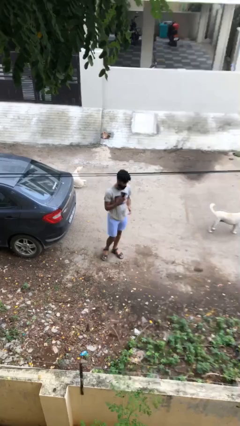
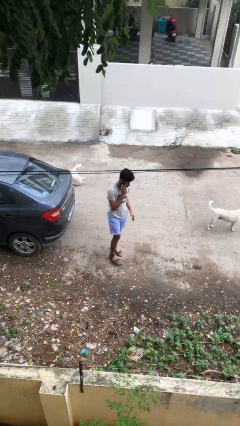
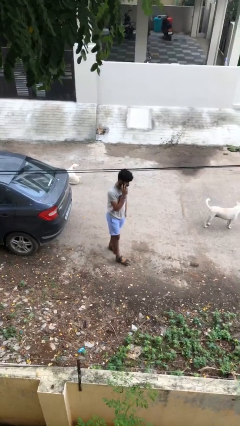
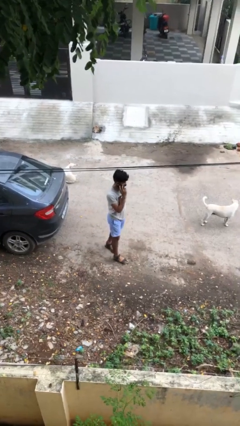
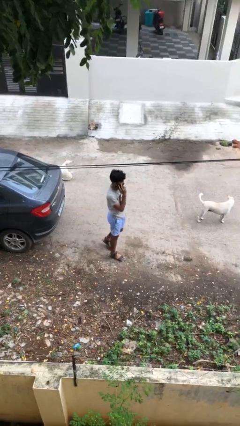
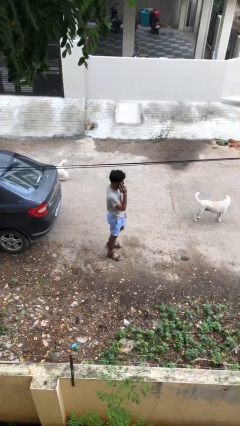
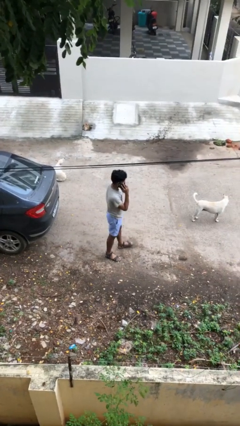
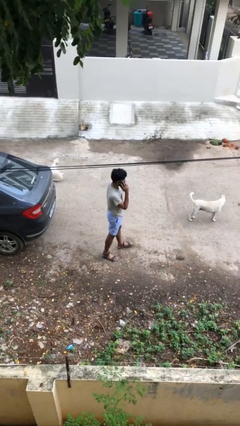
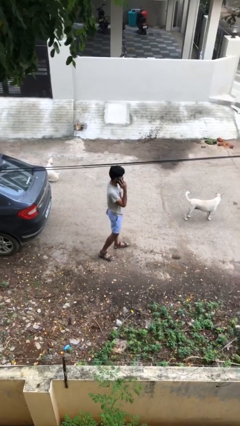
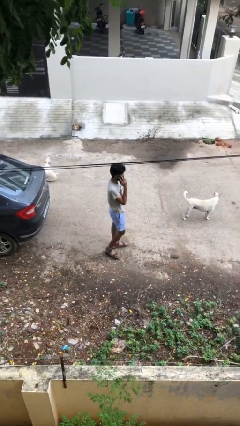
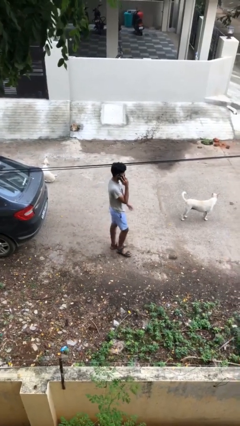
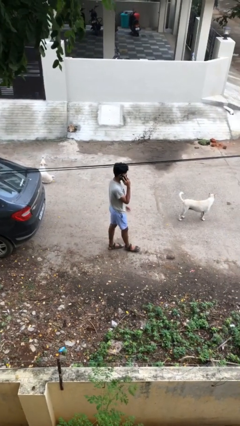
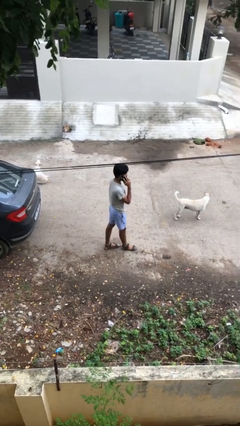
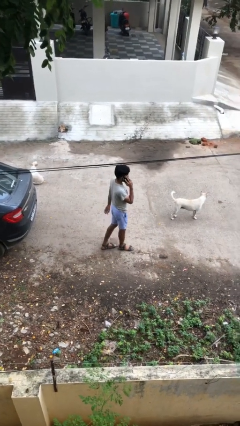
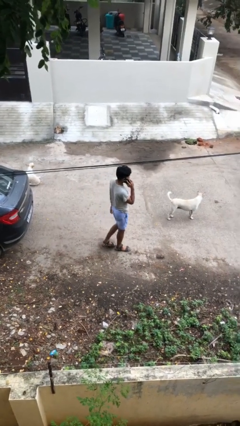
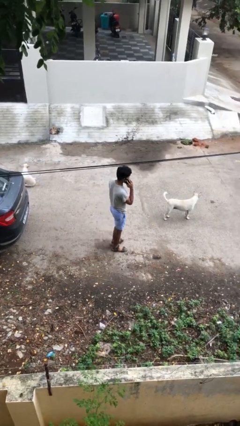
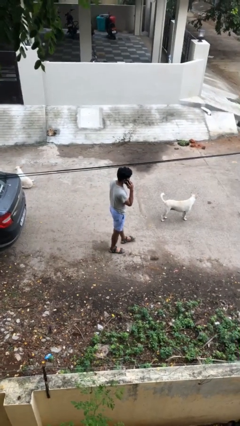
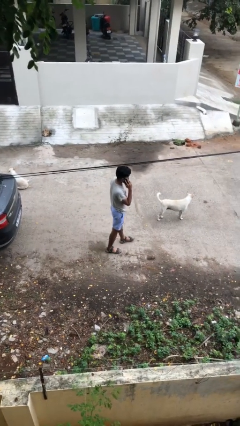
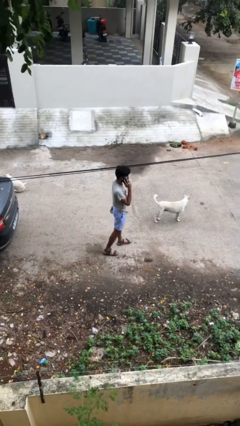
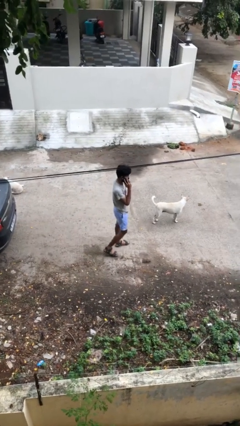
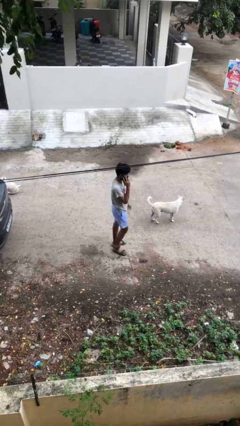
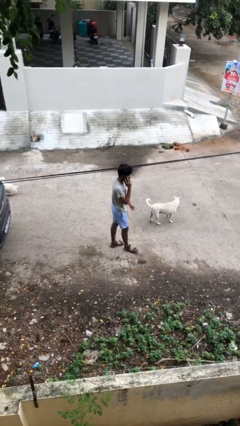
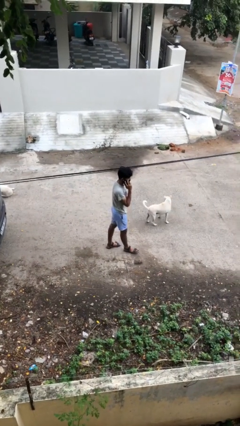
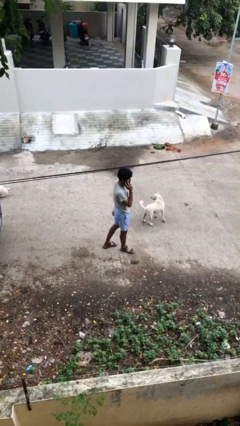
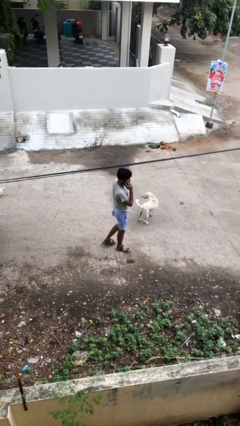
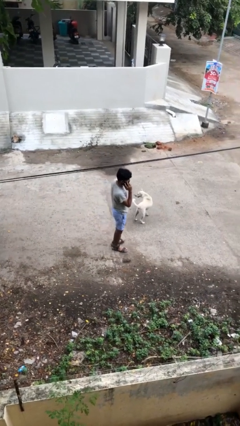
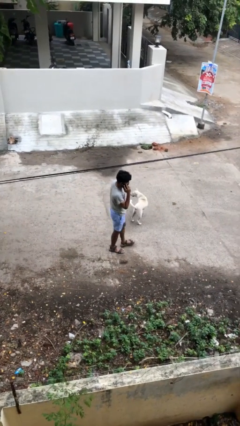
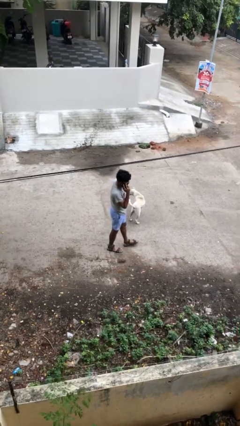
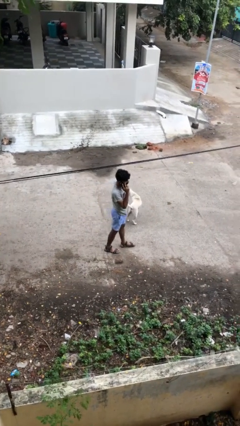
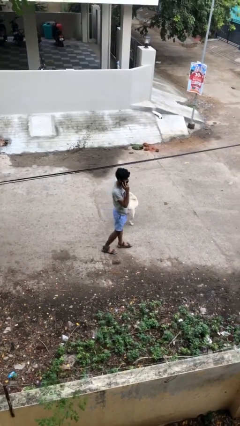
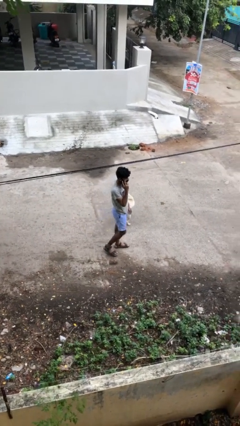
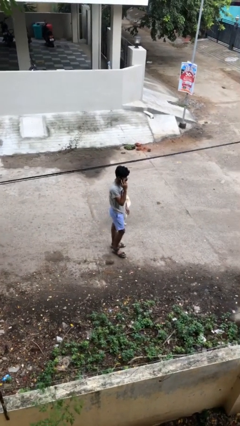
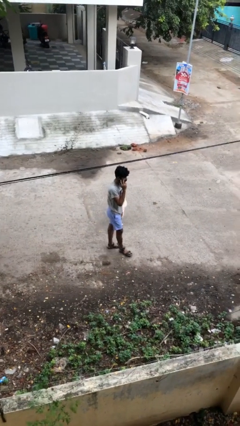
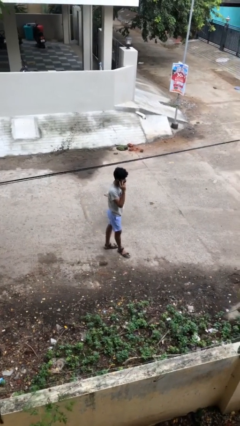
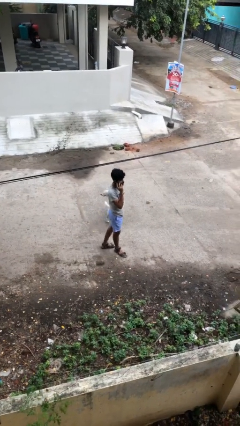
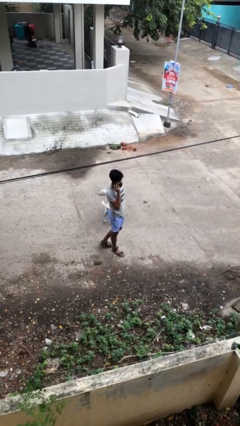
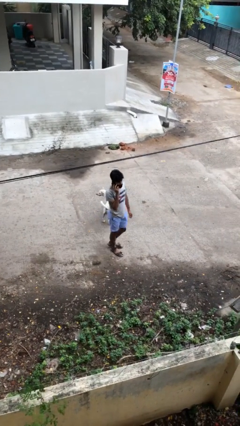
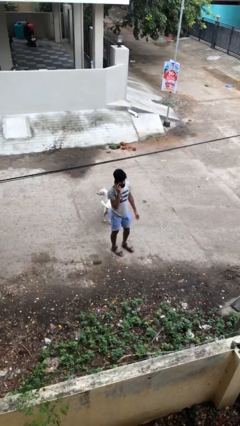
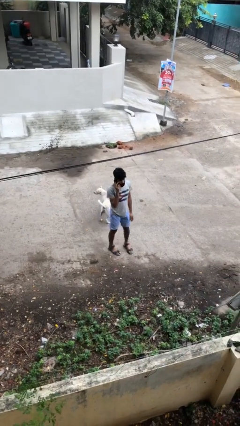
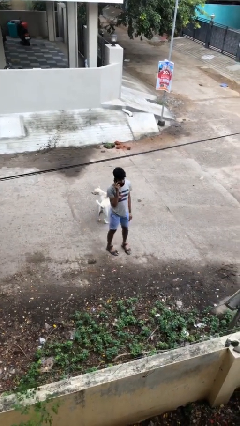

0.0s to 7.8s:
person talks on phone

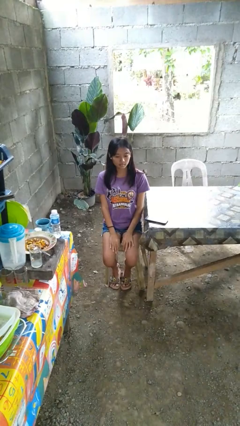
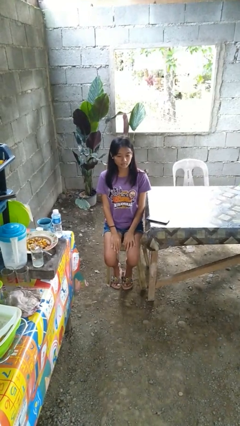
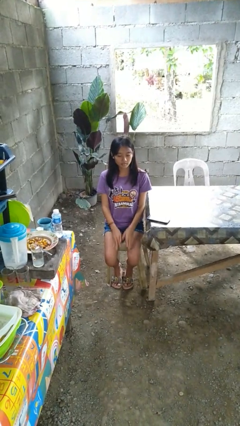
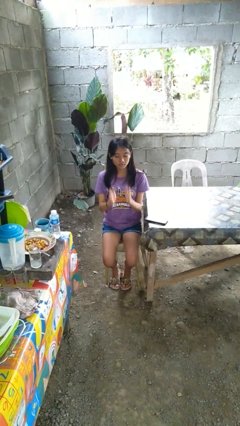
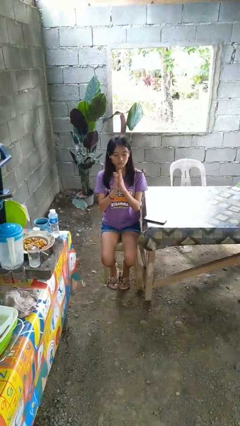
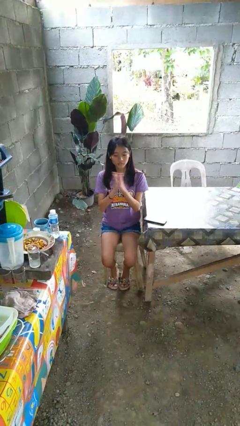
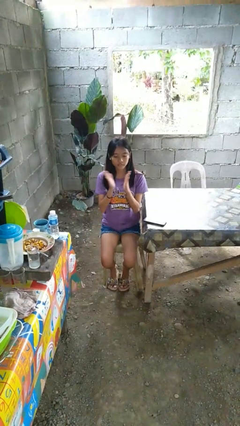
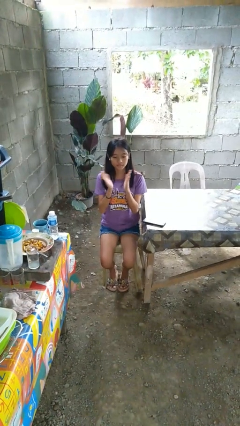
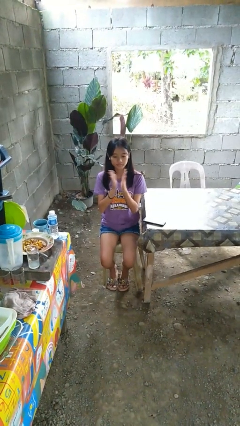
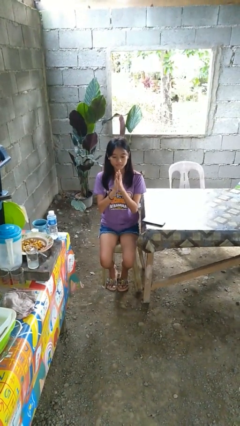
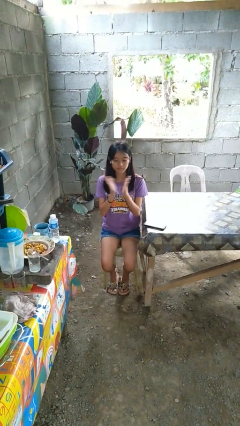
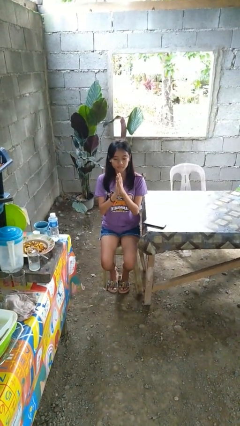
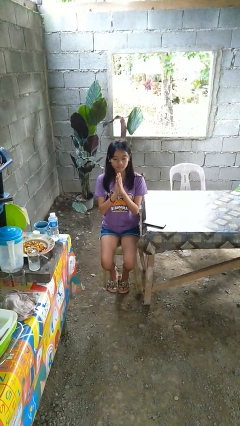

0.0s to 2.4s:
person claps hands

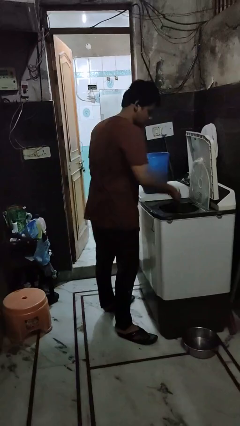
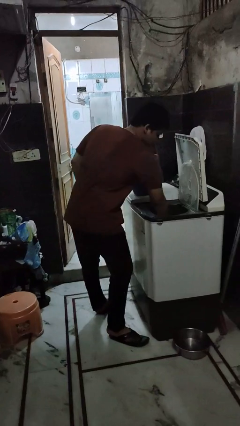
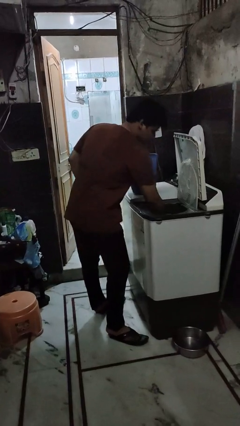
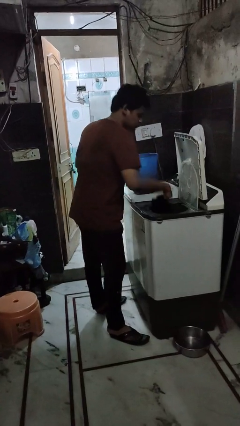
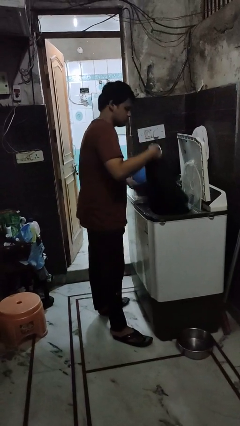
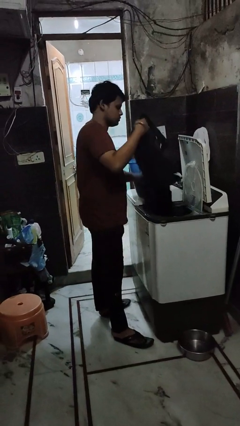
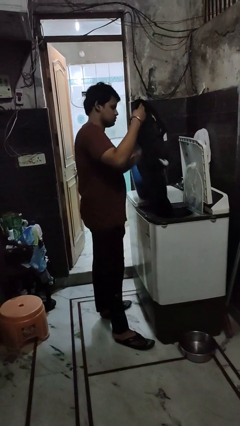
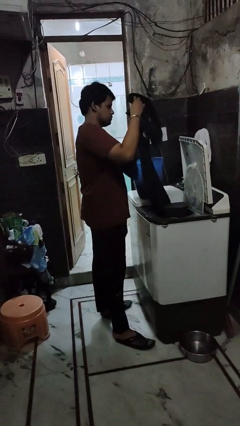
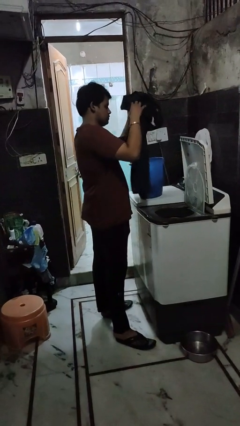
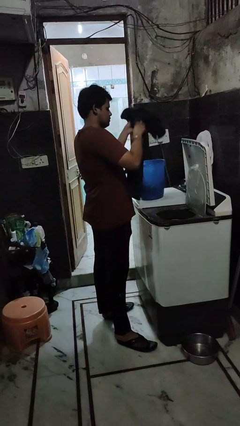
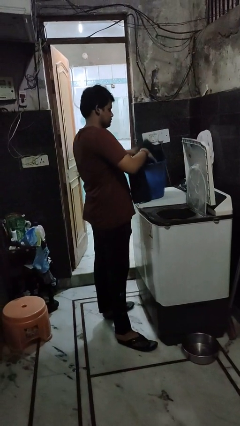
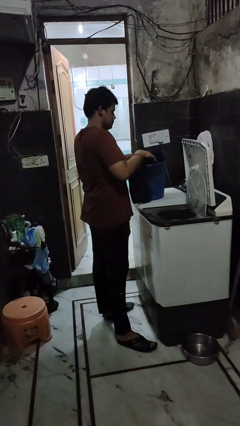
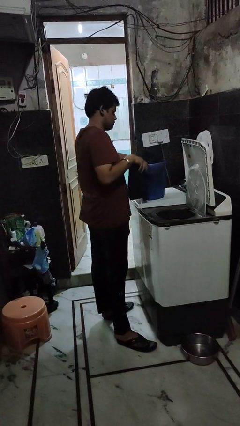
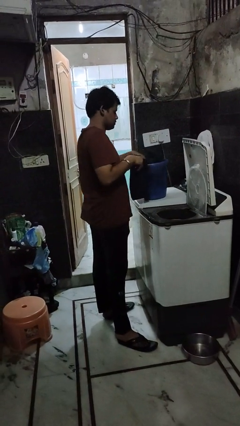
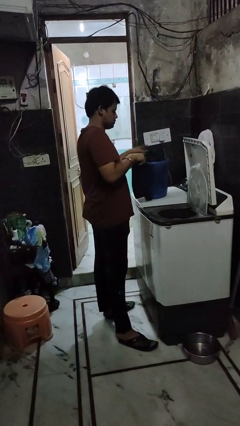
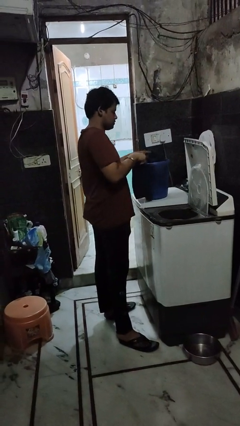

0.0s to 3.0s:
person unloads dryer

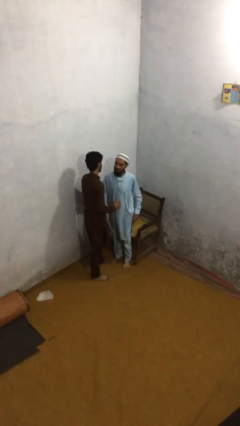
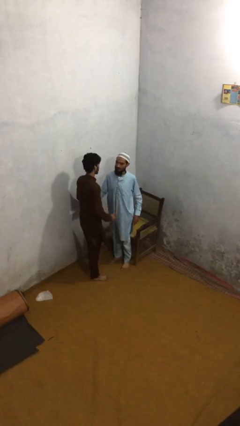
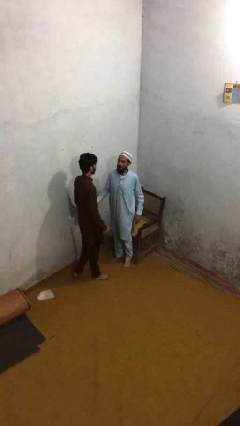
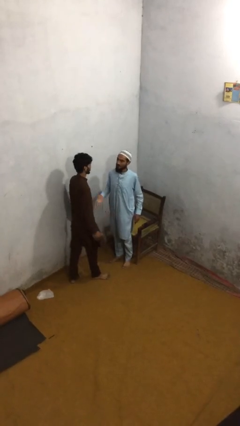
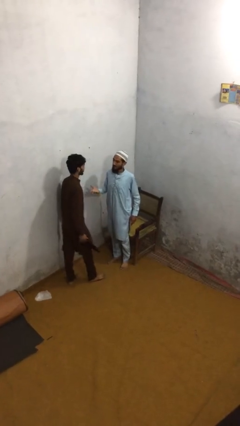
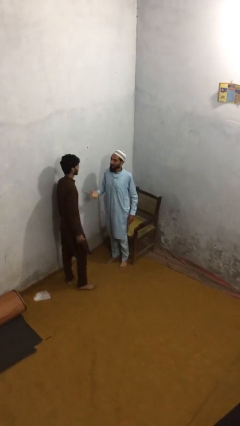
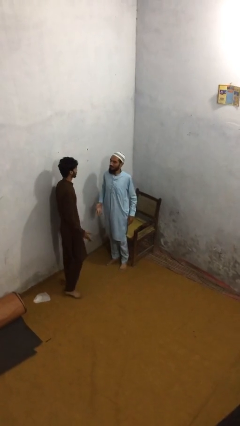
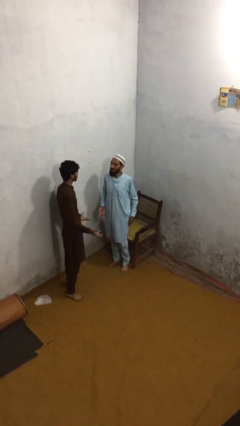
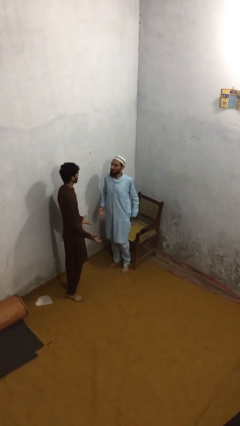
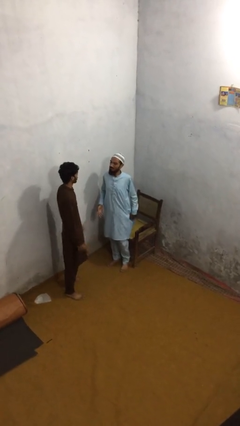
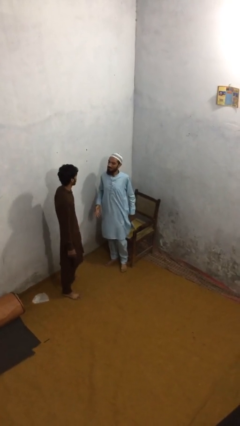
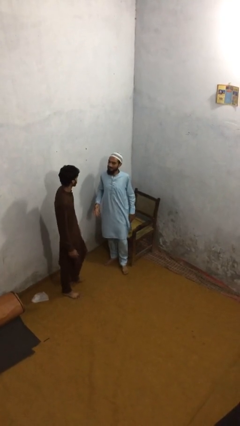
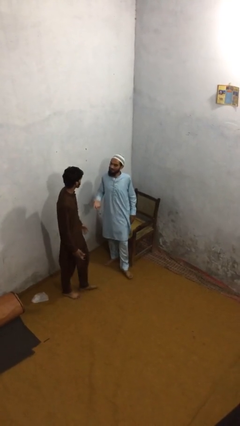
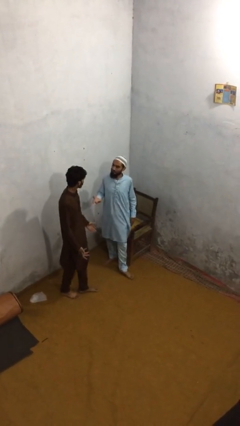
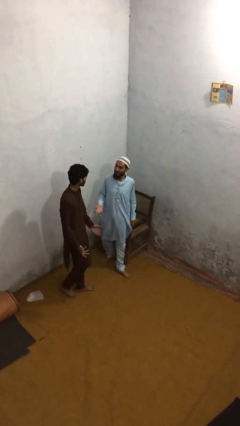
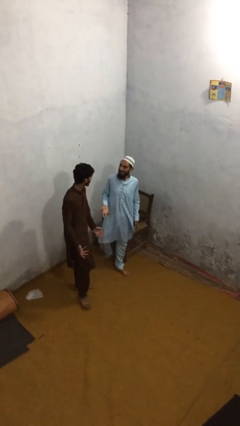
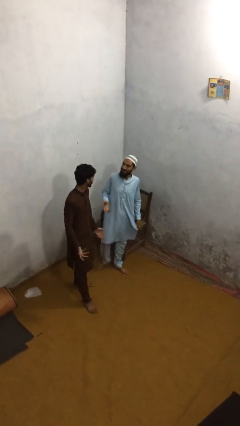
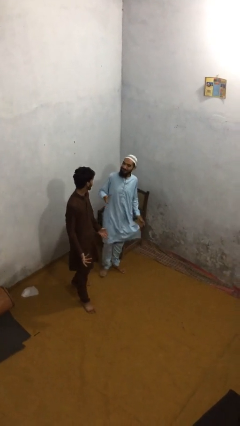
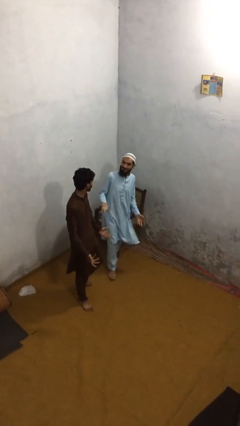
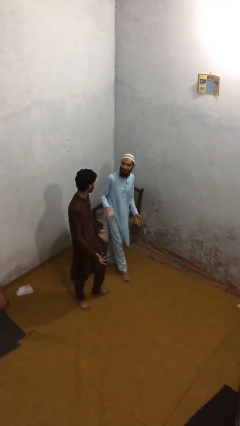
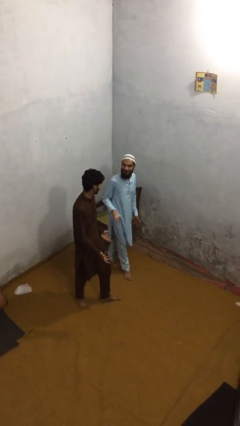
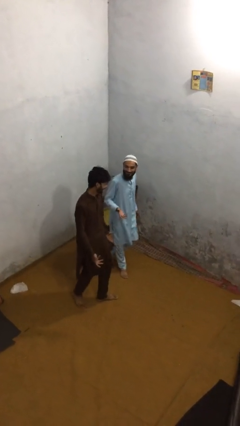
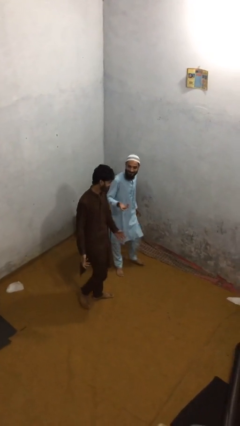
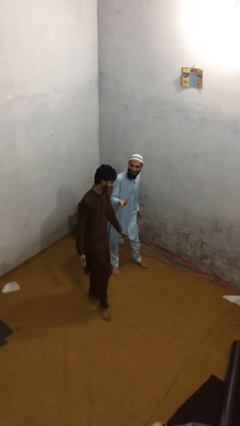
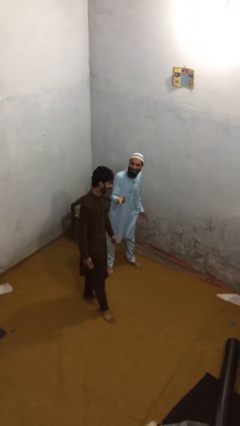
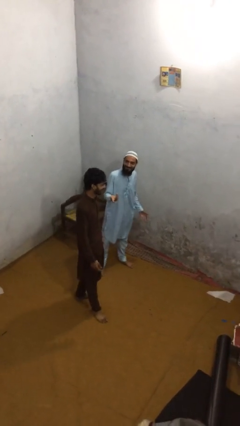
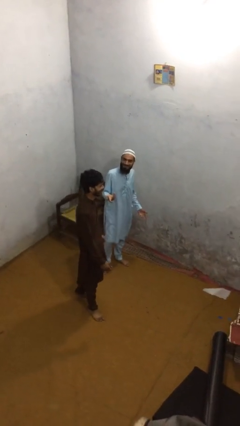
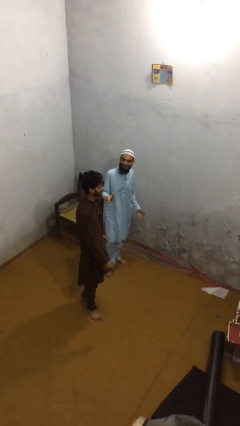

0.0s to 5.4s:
person talks to person
